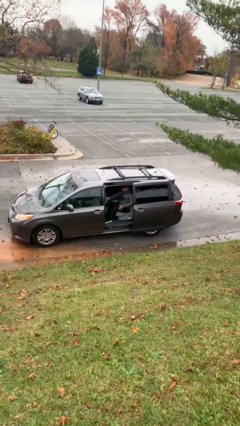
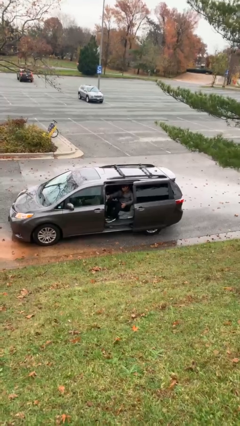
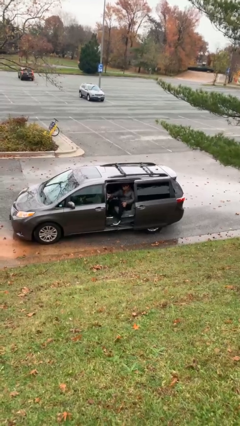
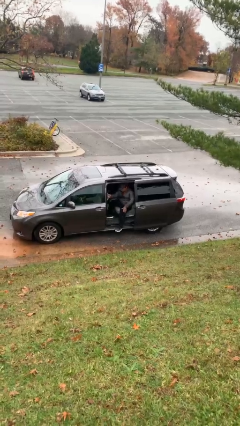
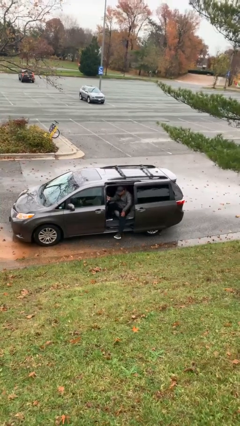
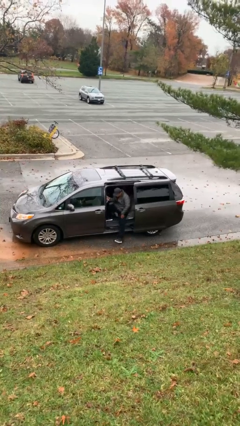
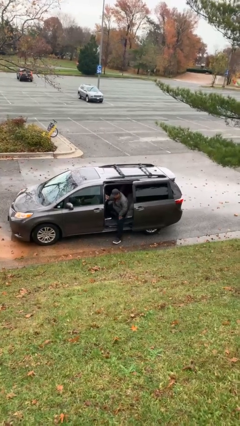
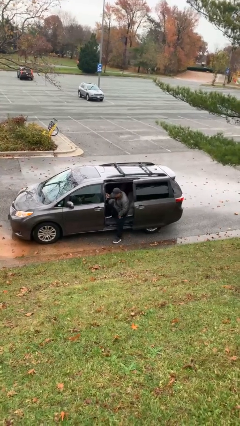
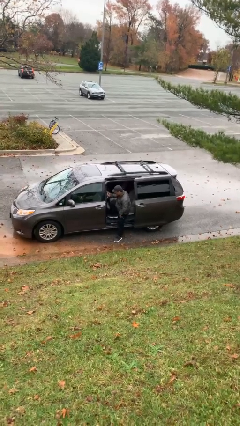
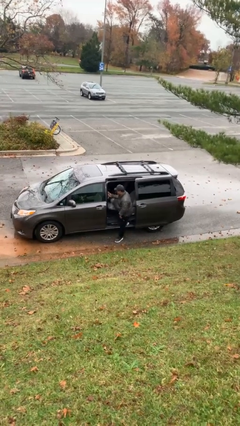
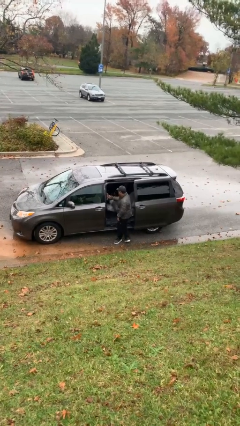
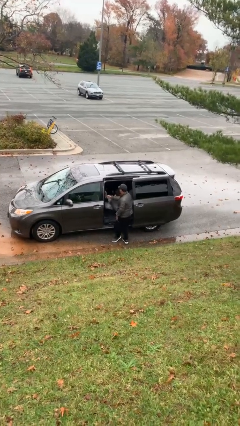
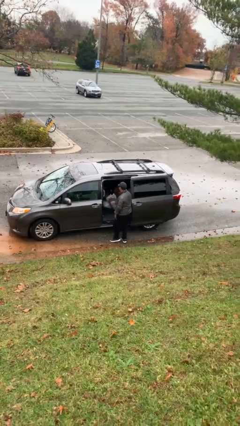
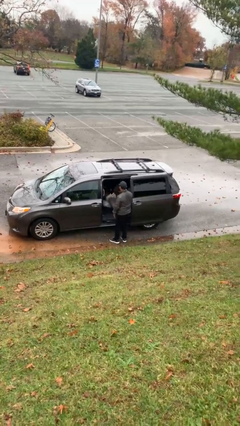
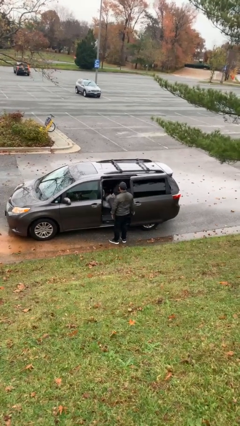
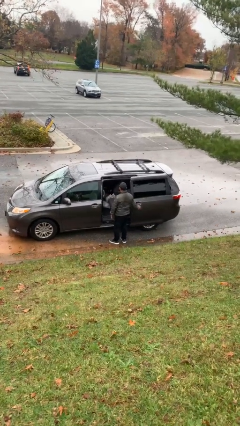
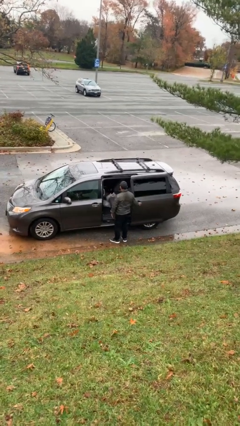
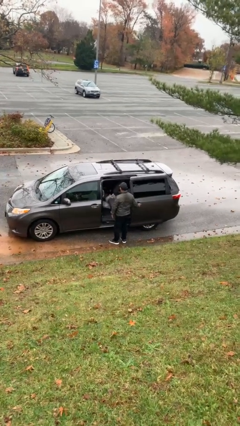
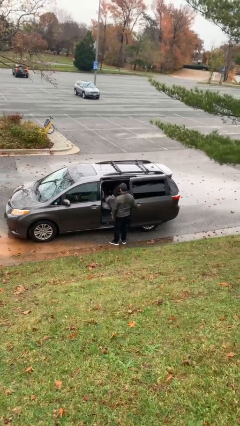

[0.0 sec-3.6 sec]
person exits car

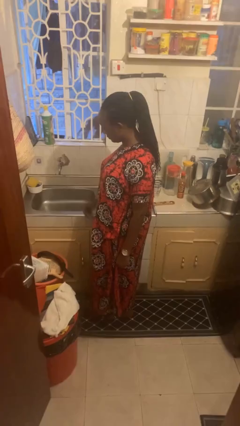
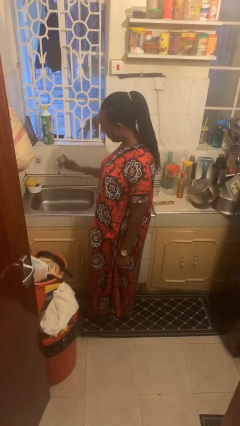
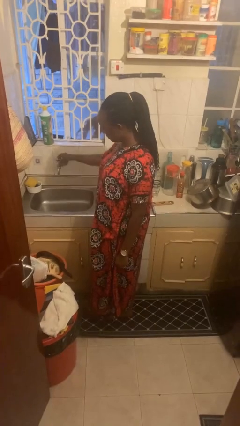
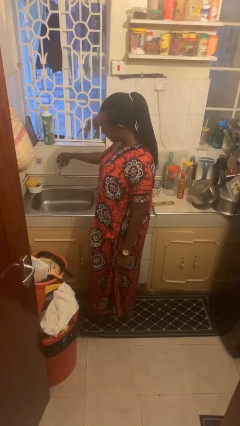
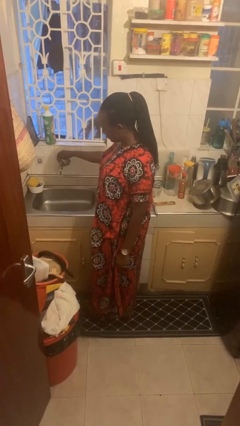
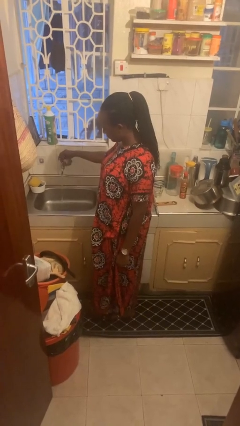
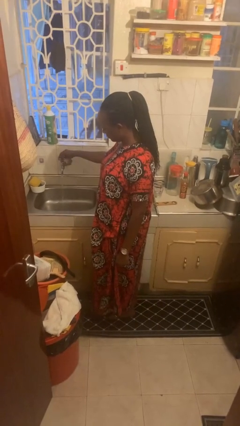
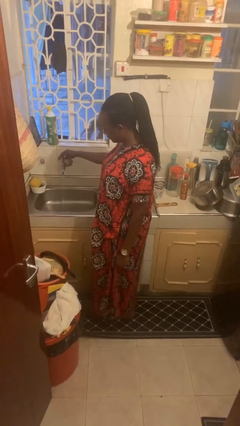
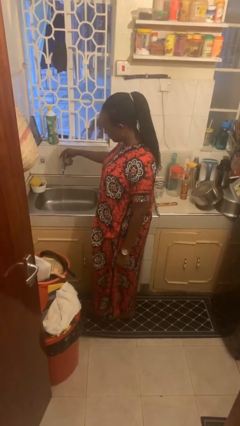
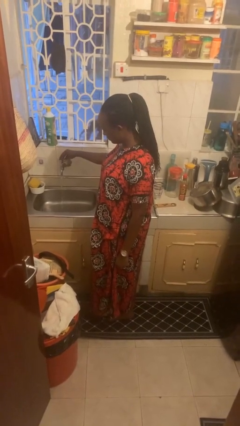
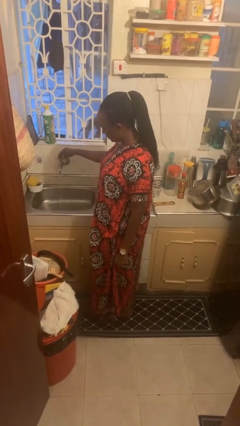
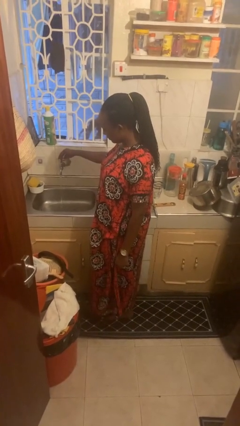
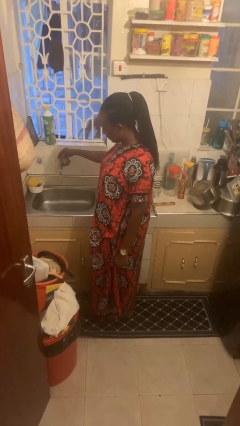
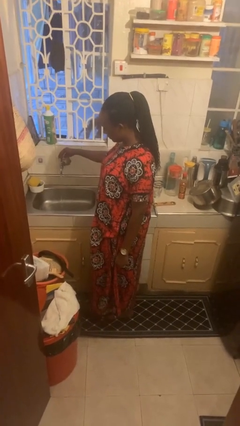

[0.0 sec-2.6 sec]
person turns on faucet

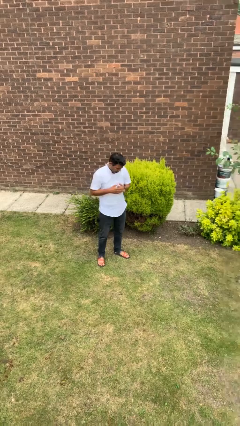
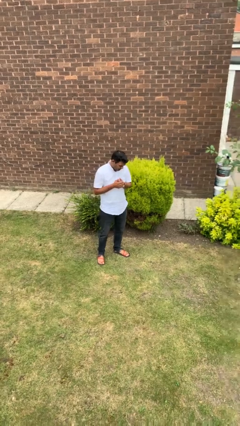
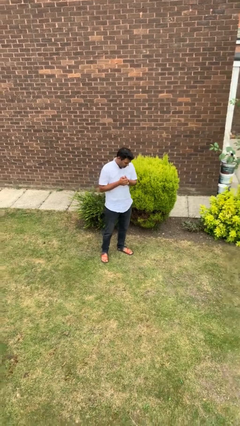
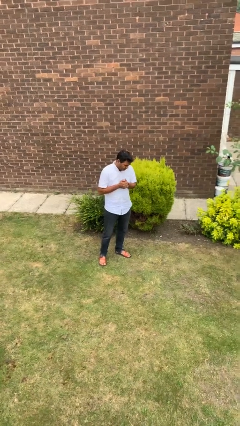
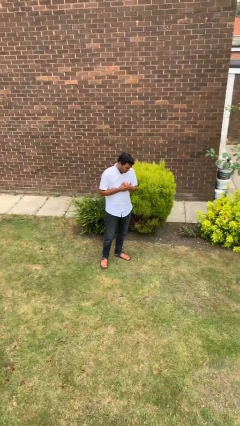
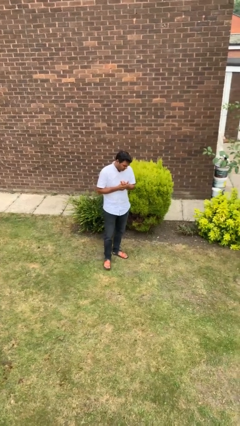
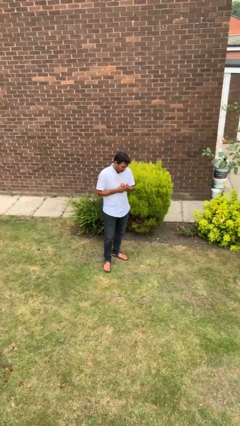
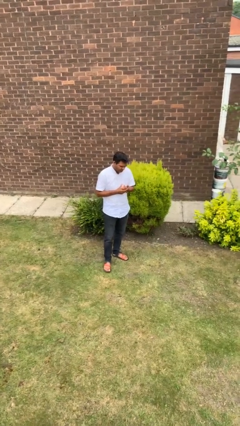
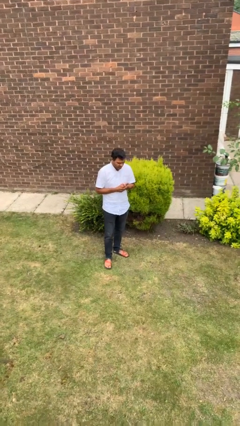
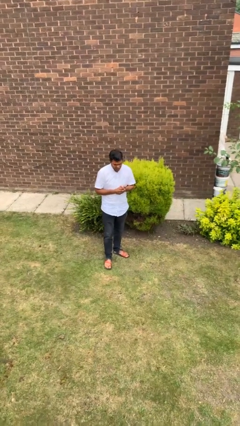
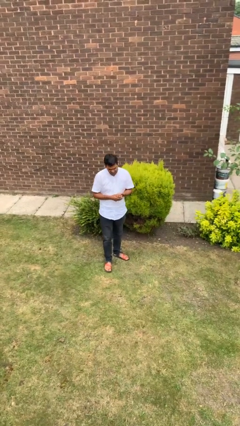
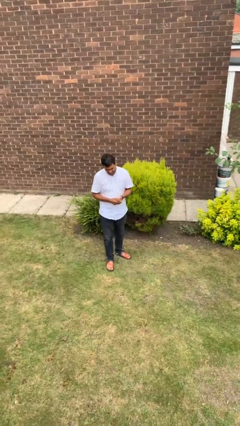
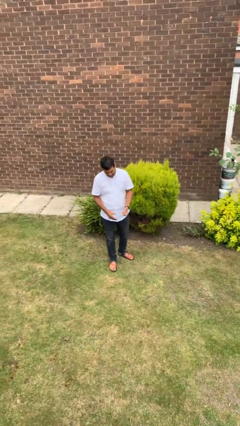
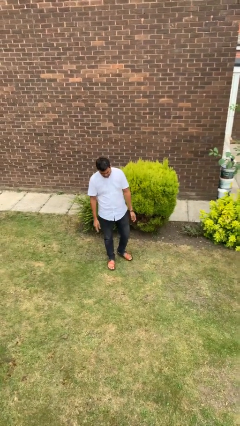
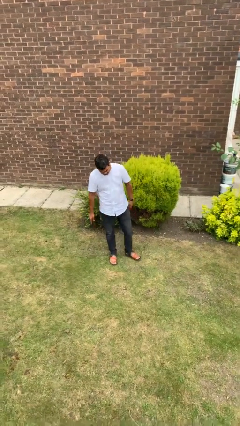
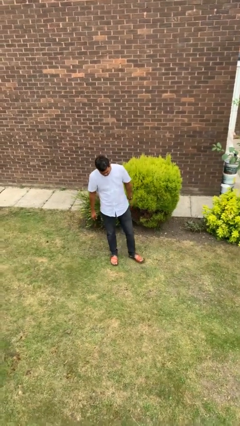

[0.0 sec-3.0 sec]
person cracks knuckles

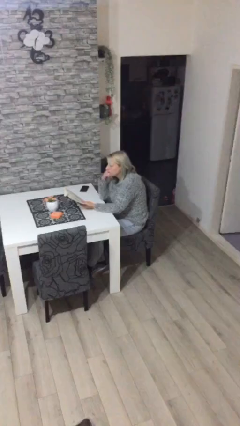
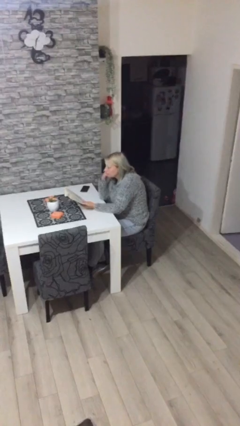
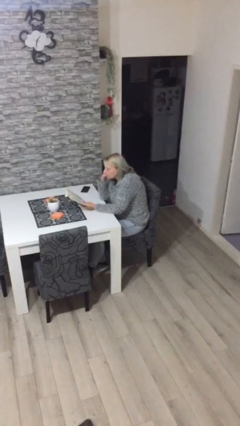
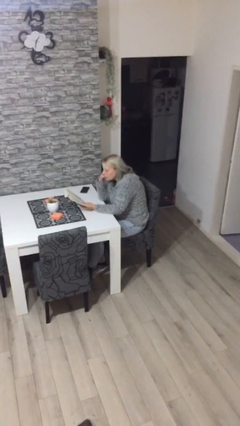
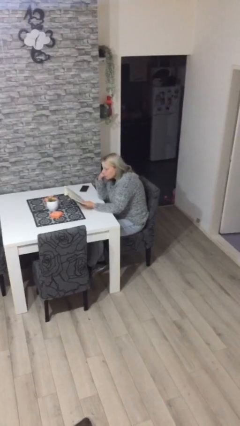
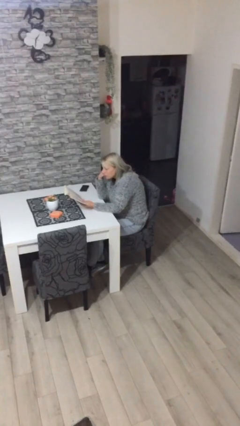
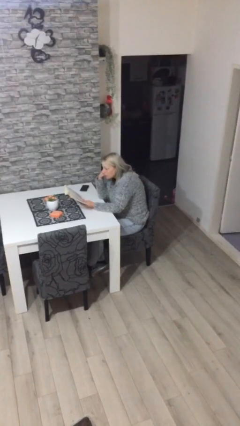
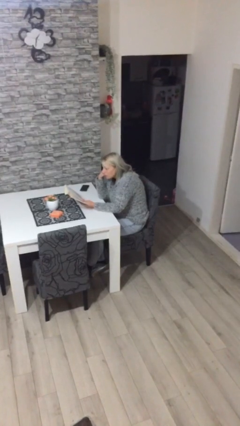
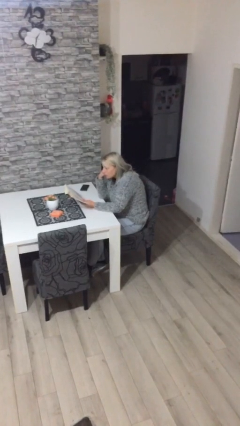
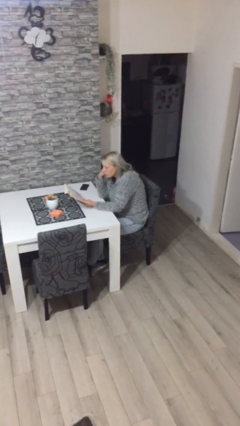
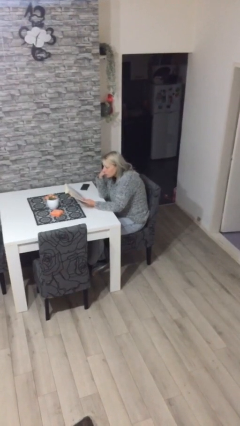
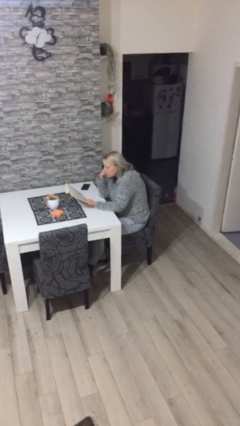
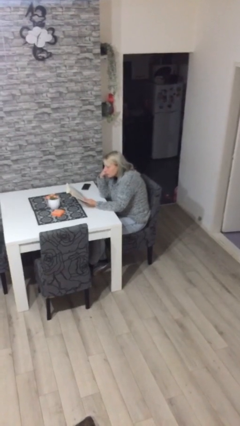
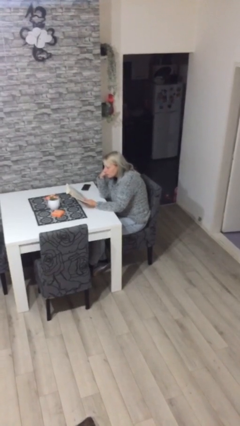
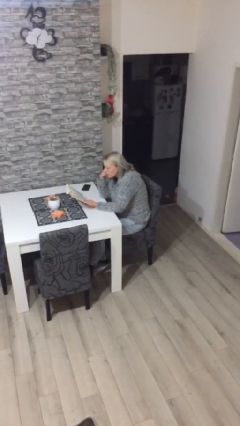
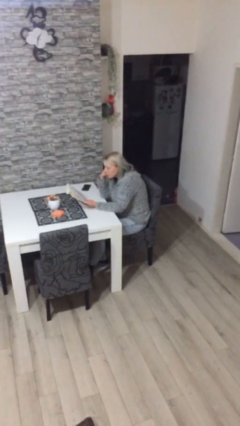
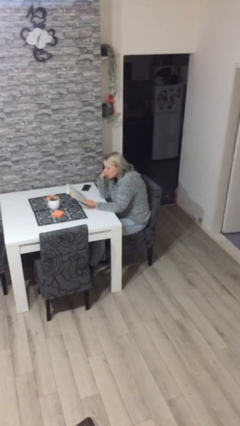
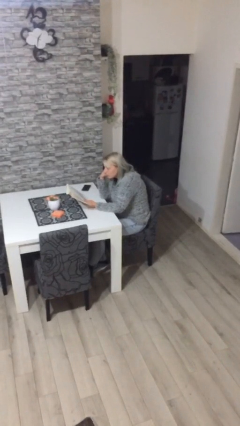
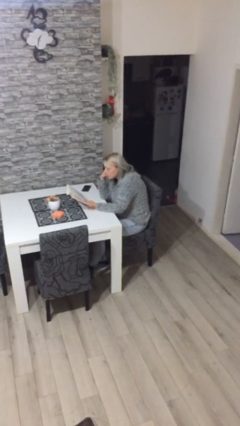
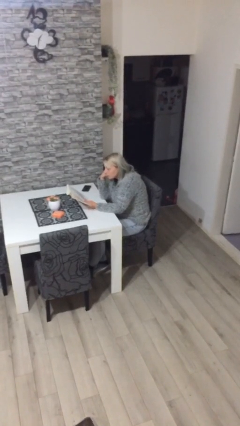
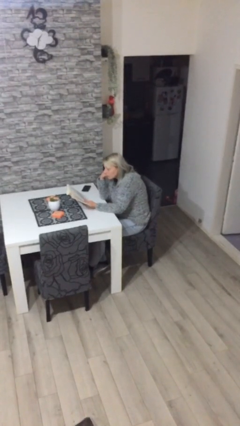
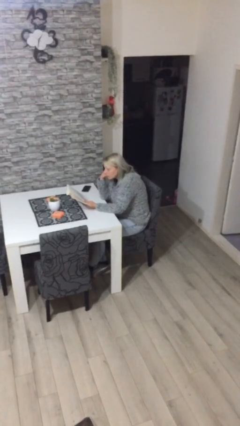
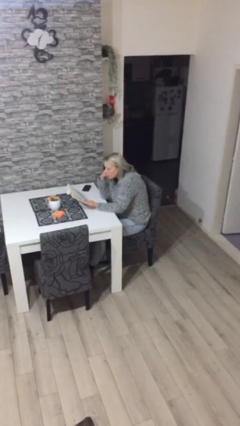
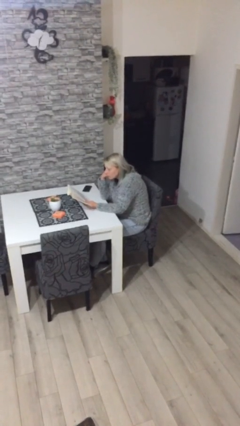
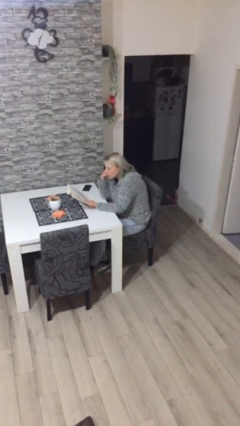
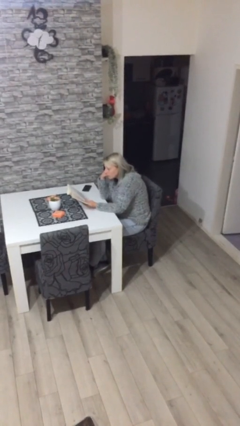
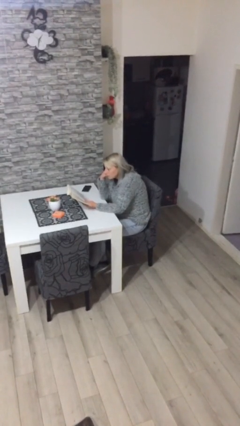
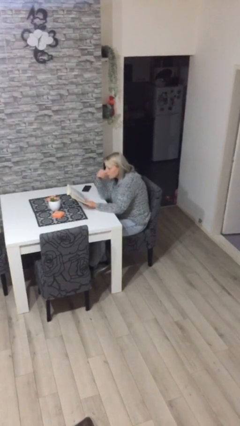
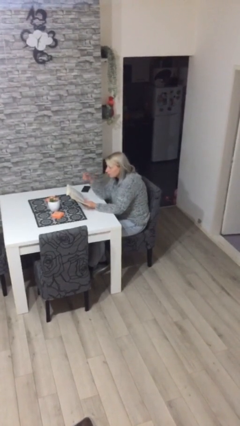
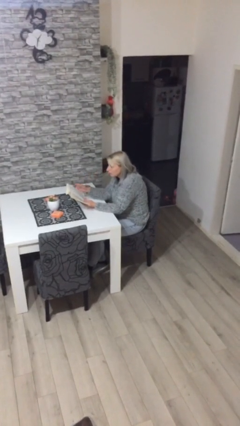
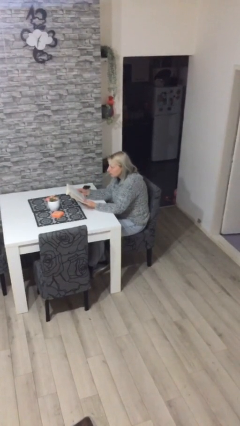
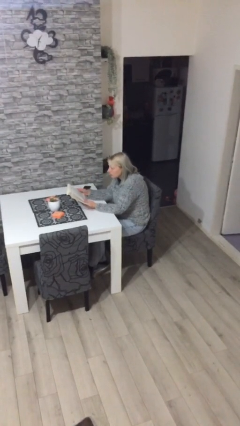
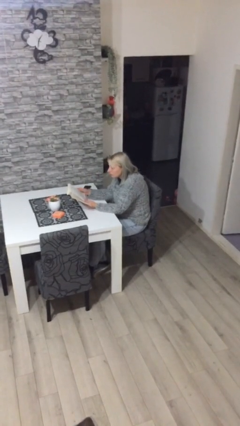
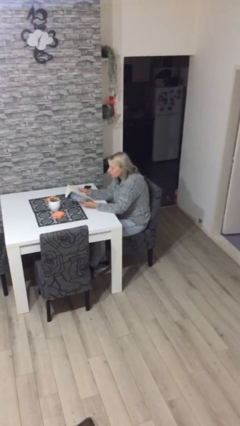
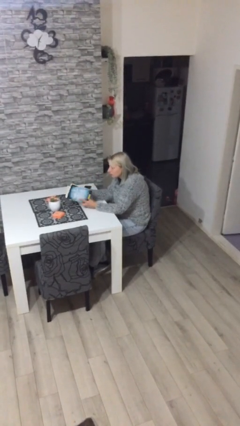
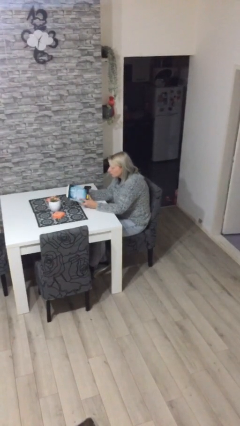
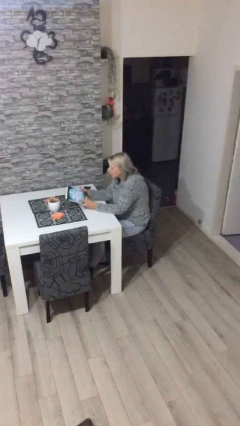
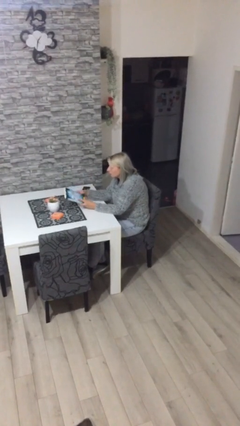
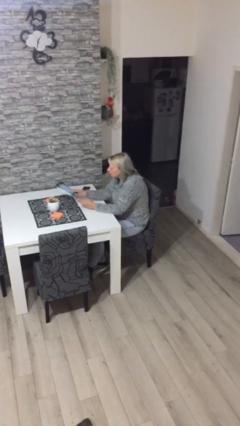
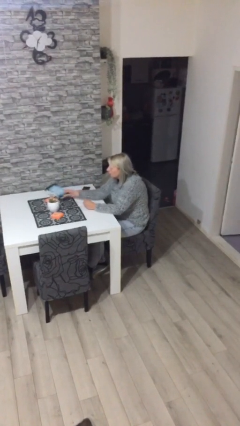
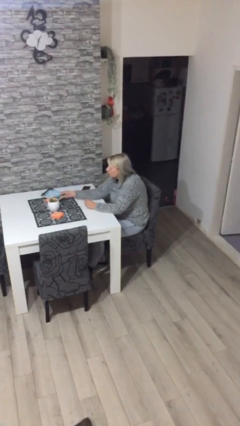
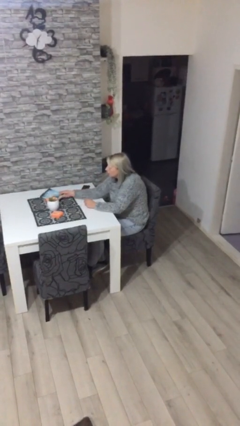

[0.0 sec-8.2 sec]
person reads document

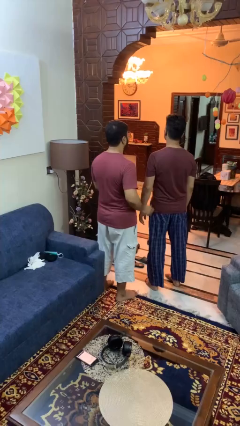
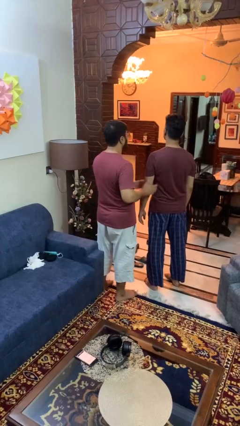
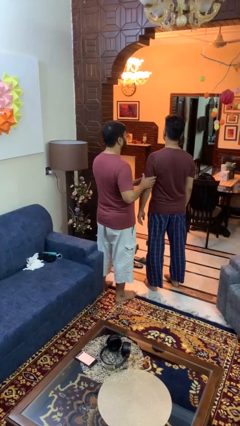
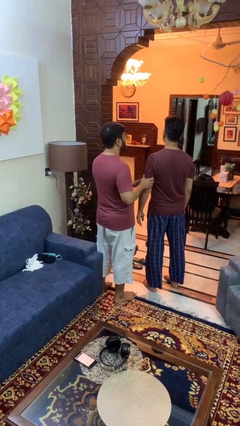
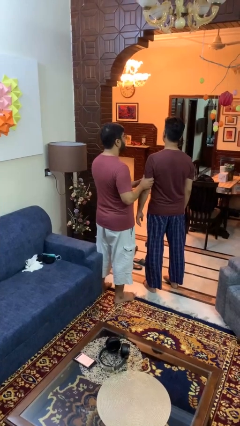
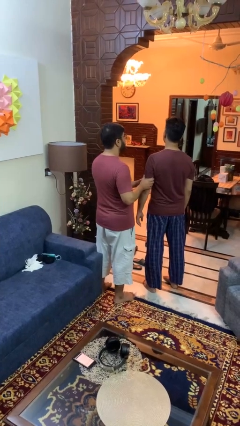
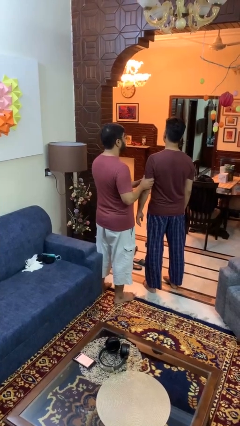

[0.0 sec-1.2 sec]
person grabs person by bicep
